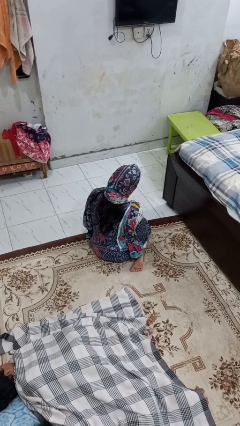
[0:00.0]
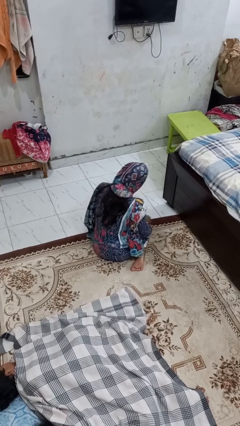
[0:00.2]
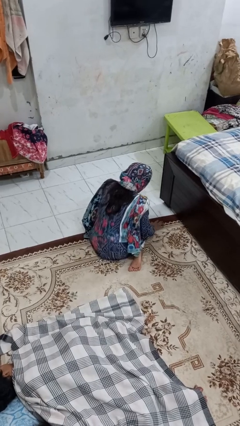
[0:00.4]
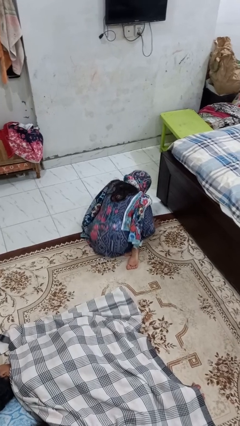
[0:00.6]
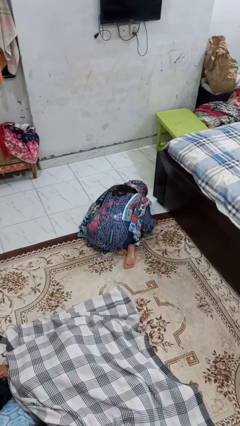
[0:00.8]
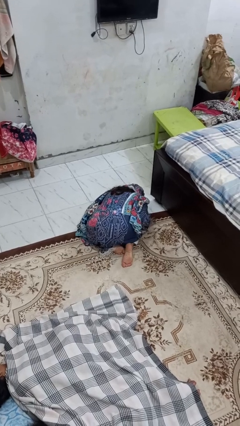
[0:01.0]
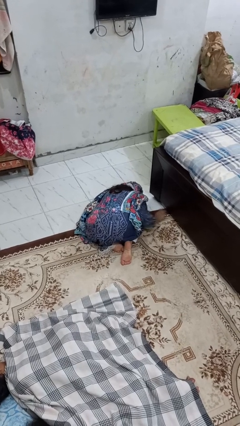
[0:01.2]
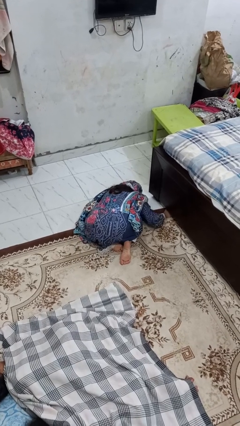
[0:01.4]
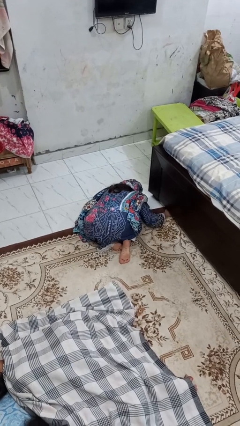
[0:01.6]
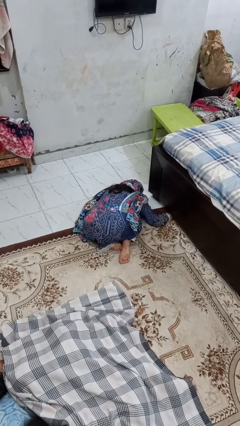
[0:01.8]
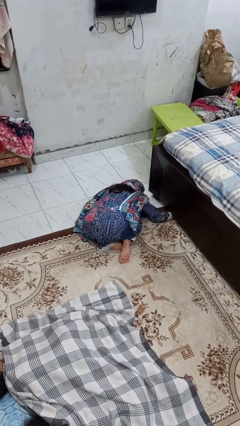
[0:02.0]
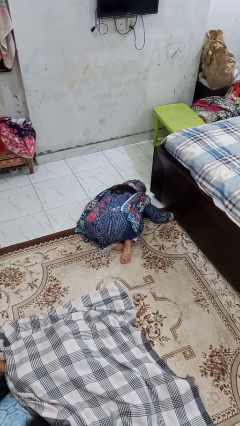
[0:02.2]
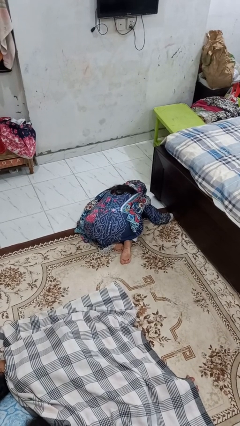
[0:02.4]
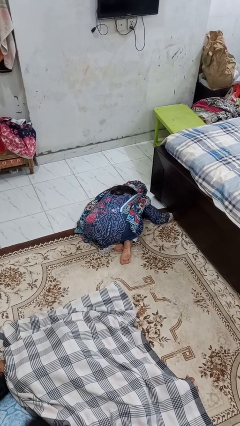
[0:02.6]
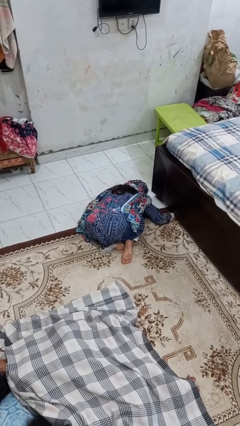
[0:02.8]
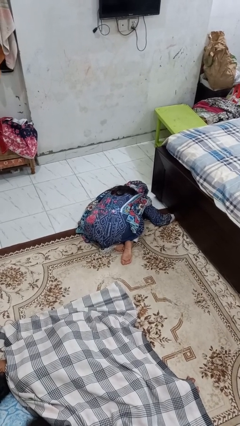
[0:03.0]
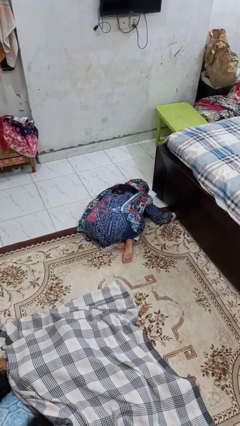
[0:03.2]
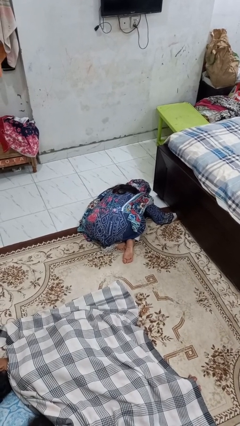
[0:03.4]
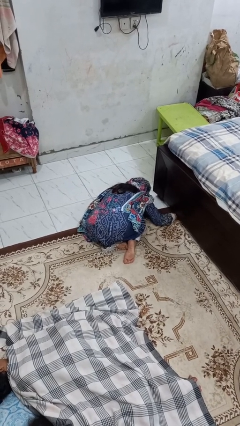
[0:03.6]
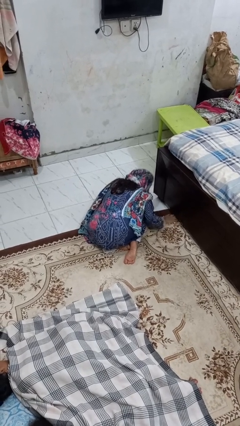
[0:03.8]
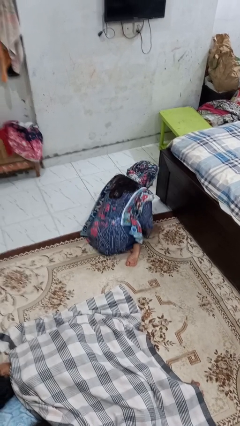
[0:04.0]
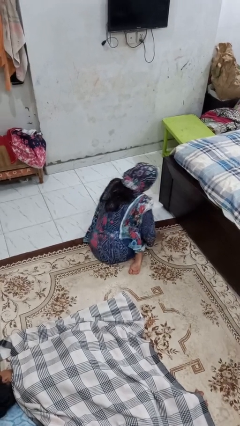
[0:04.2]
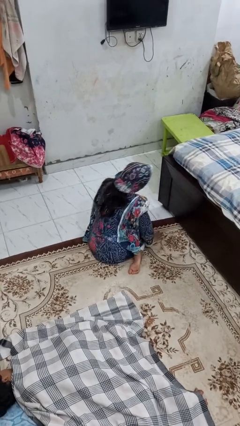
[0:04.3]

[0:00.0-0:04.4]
person searches under bed

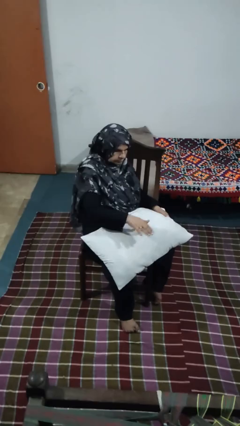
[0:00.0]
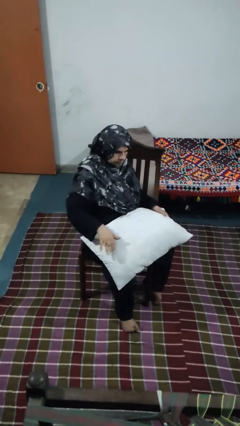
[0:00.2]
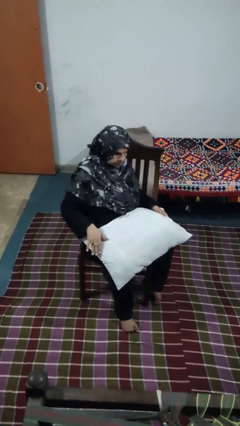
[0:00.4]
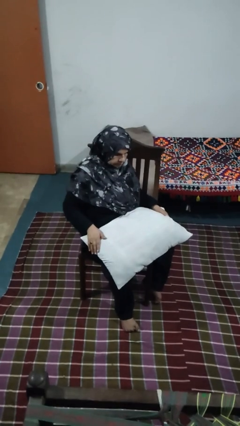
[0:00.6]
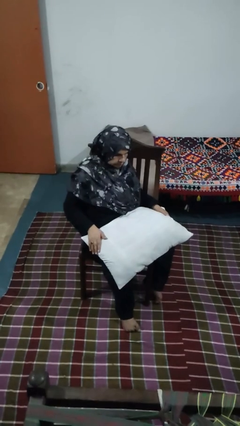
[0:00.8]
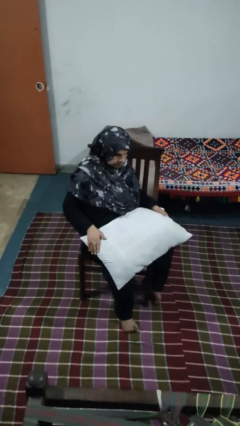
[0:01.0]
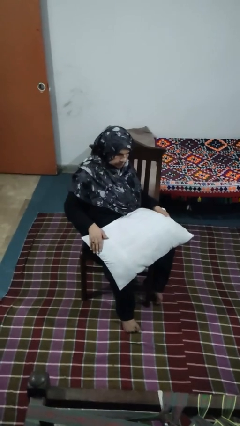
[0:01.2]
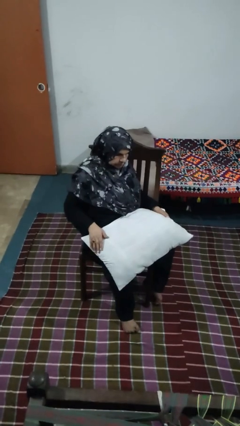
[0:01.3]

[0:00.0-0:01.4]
person waves hand over object

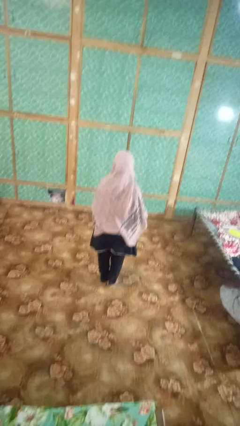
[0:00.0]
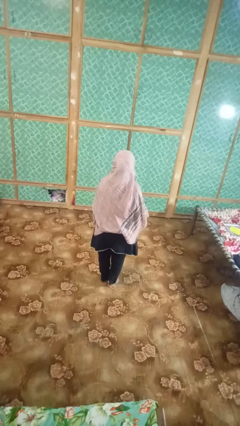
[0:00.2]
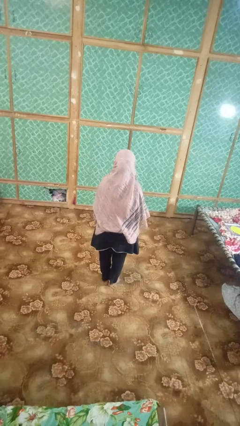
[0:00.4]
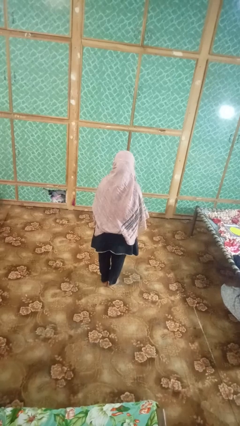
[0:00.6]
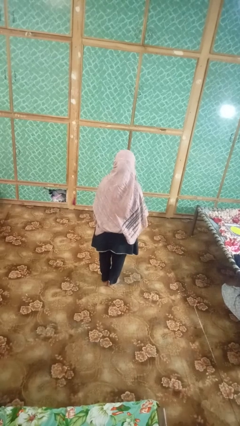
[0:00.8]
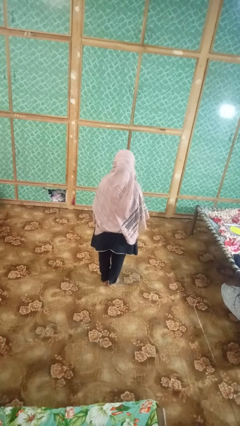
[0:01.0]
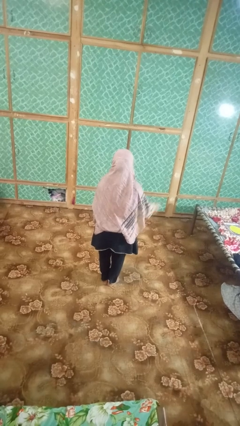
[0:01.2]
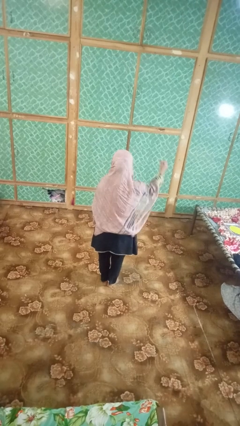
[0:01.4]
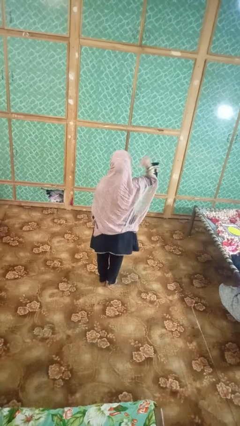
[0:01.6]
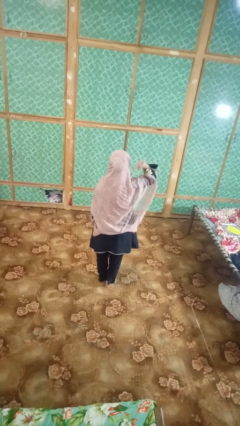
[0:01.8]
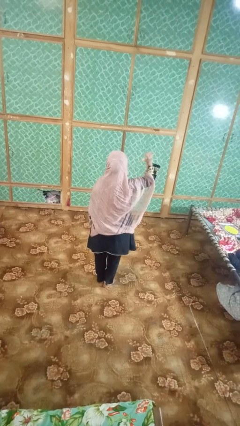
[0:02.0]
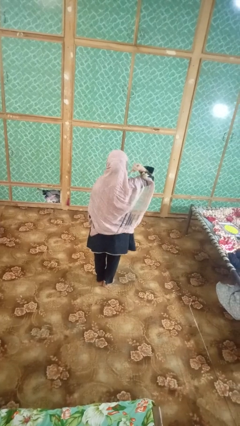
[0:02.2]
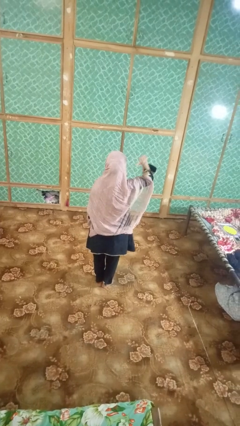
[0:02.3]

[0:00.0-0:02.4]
person gestures behind me

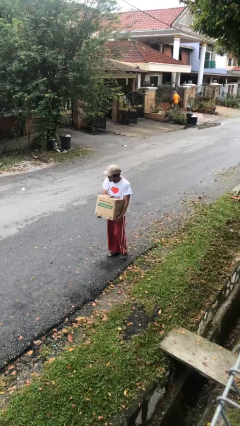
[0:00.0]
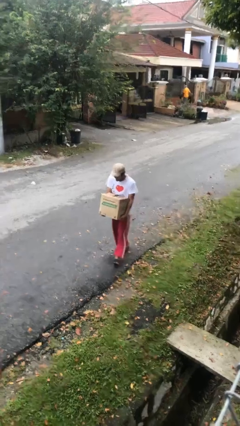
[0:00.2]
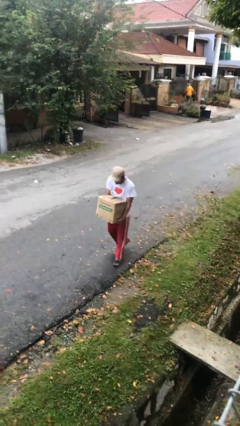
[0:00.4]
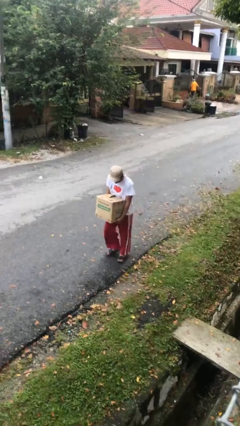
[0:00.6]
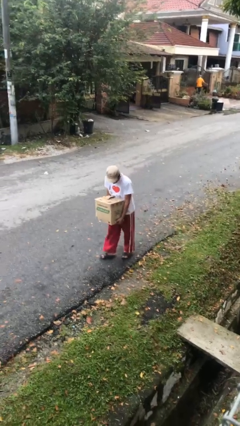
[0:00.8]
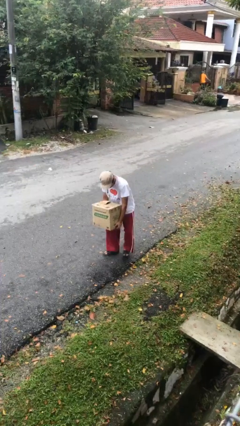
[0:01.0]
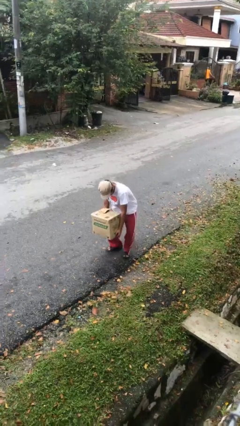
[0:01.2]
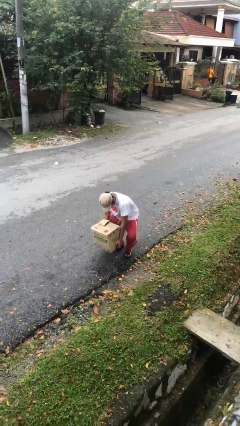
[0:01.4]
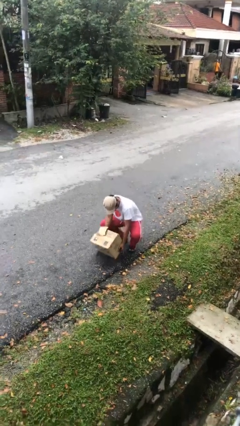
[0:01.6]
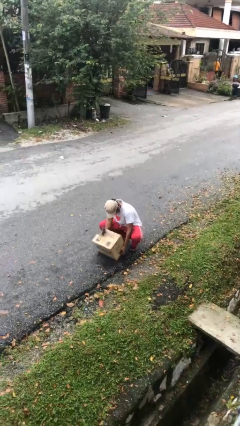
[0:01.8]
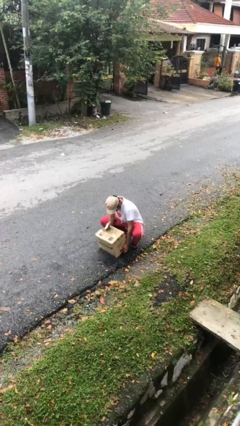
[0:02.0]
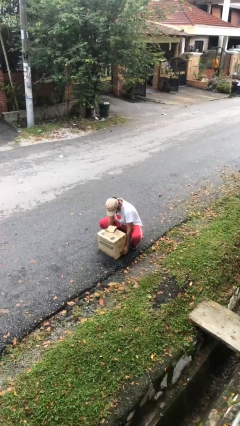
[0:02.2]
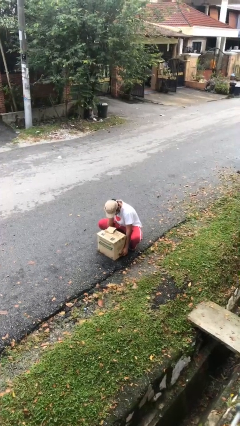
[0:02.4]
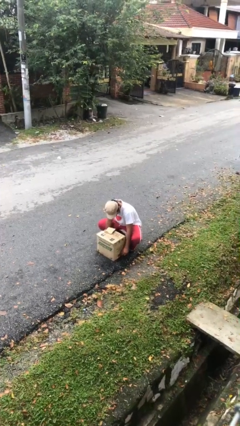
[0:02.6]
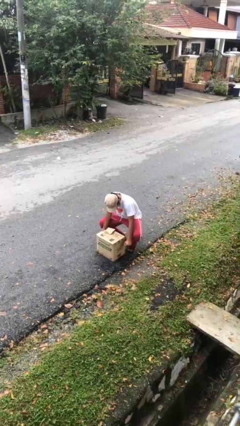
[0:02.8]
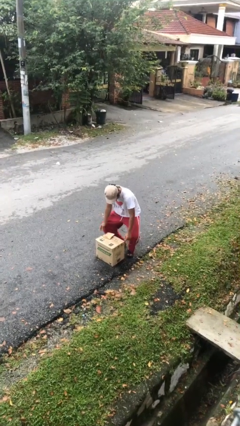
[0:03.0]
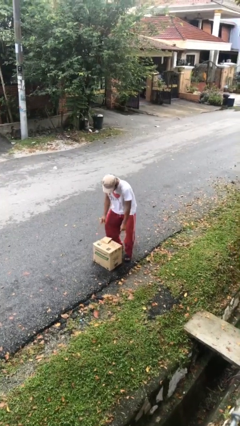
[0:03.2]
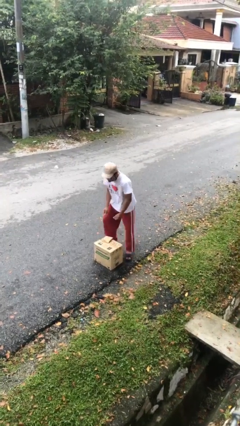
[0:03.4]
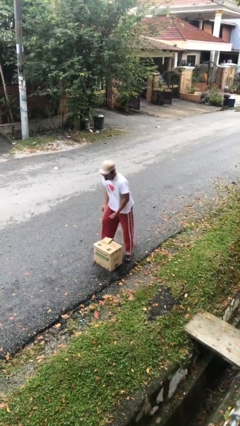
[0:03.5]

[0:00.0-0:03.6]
person puts down object on floor

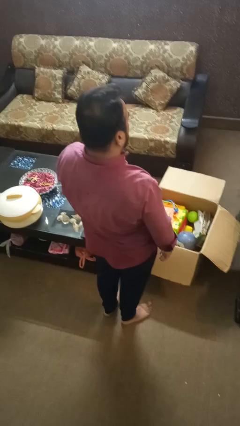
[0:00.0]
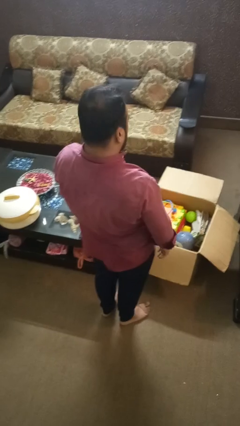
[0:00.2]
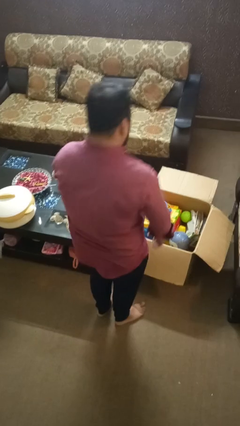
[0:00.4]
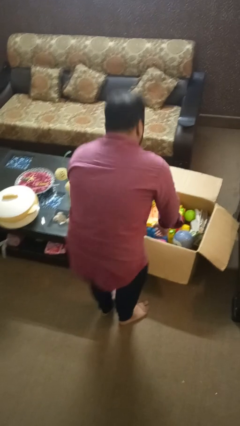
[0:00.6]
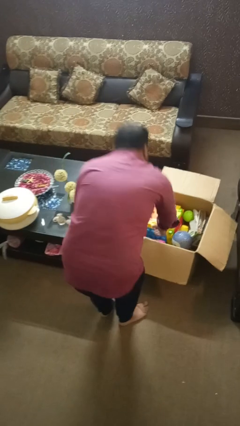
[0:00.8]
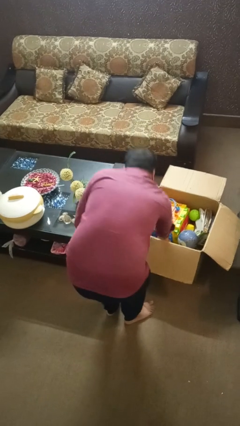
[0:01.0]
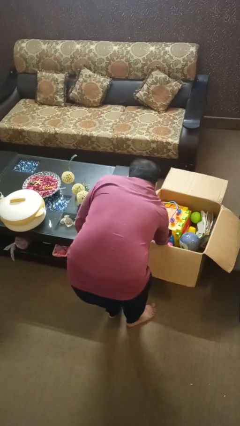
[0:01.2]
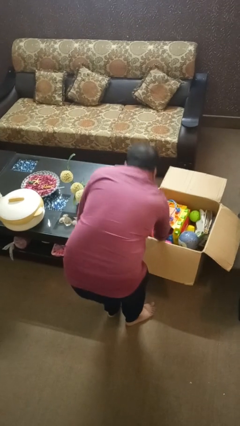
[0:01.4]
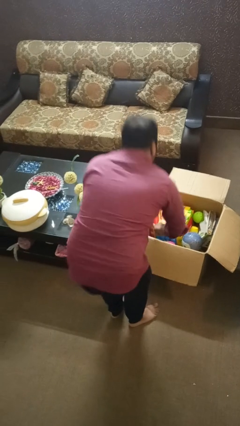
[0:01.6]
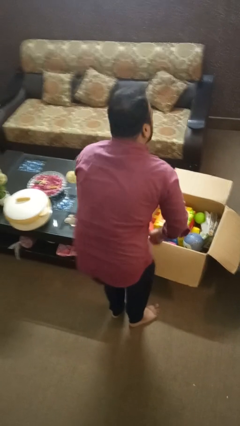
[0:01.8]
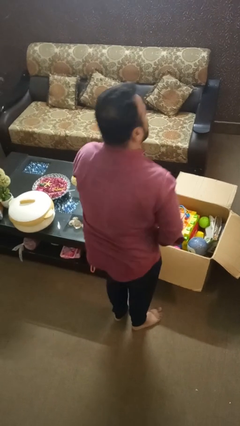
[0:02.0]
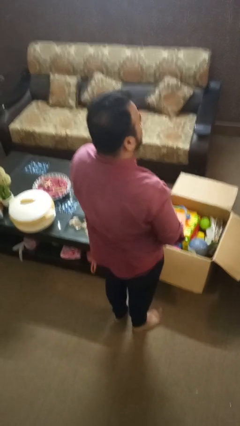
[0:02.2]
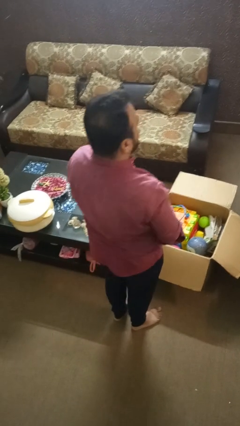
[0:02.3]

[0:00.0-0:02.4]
person takes object from box

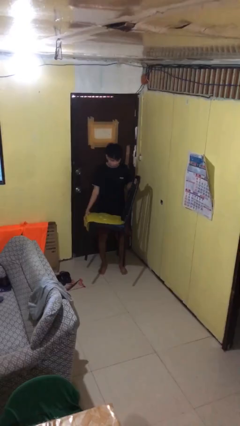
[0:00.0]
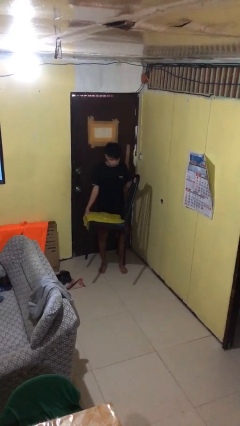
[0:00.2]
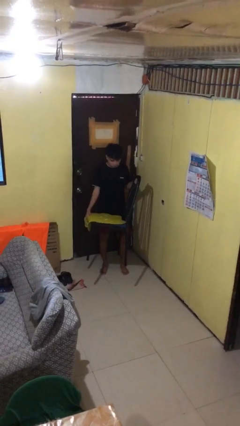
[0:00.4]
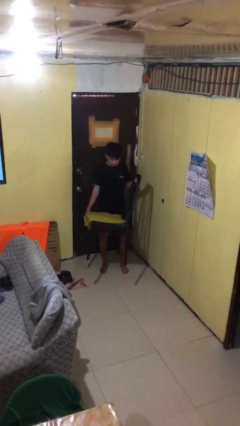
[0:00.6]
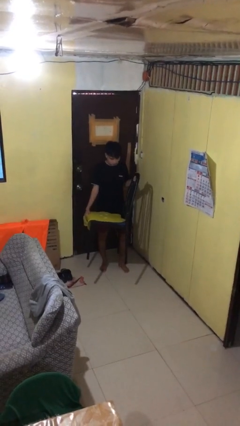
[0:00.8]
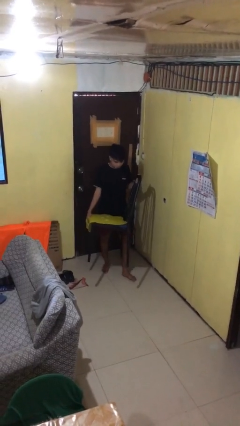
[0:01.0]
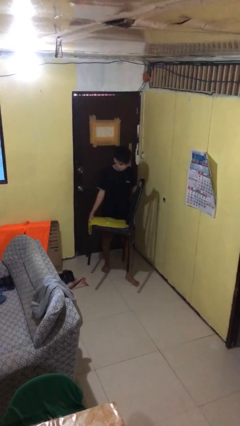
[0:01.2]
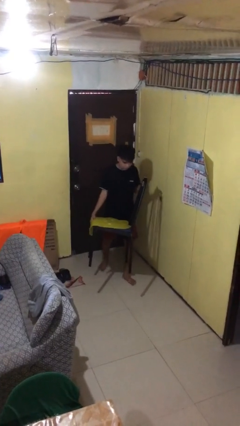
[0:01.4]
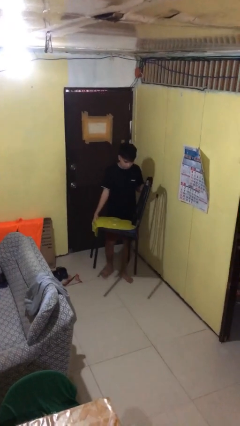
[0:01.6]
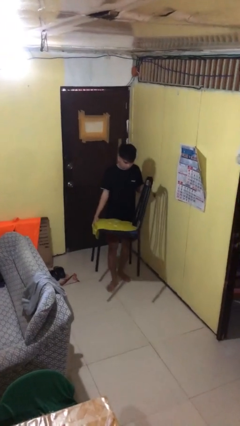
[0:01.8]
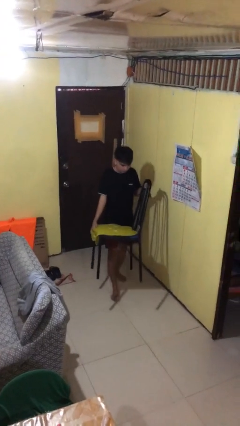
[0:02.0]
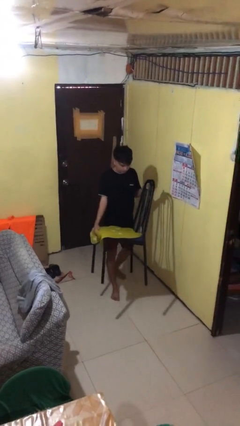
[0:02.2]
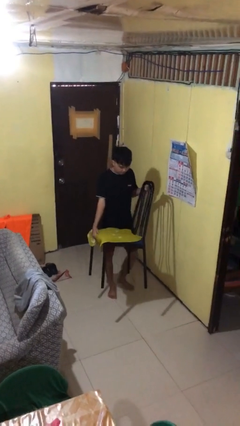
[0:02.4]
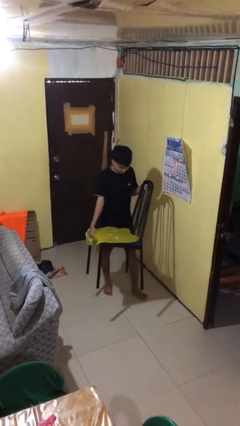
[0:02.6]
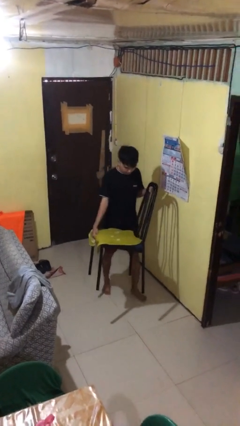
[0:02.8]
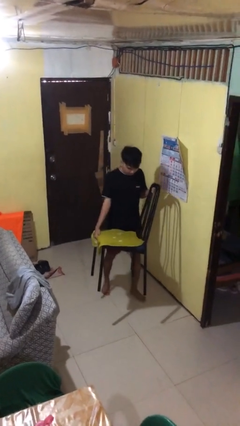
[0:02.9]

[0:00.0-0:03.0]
person carries furniture
